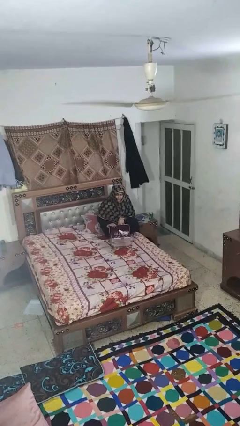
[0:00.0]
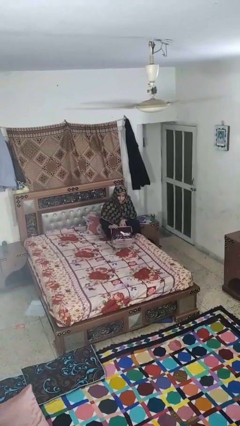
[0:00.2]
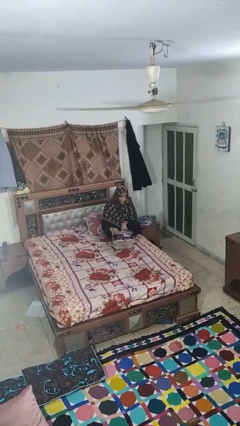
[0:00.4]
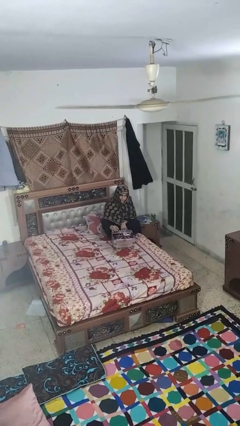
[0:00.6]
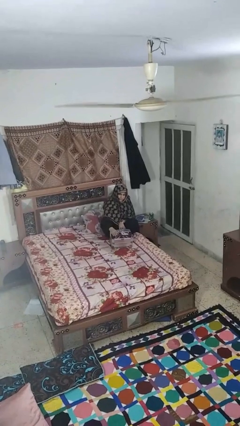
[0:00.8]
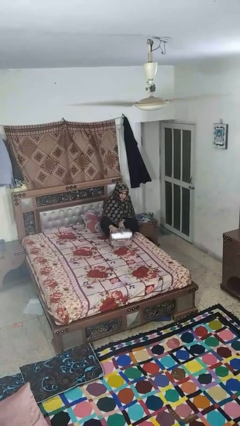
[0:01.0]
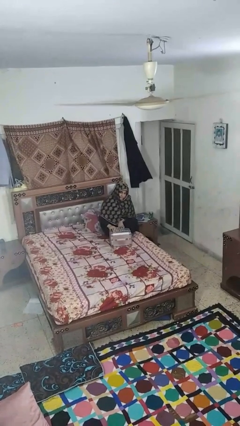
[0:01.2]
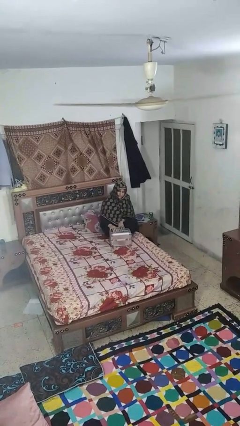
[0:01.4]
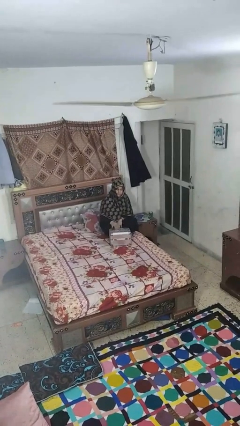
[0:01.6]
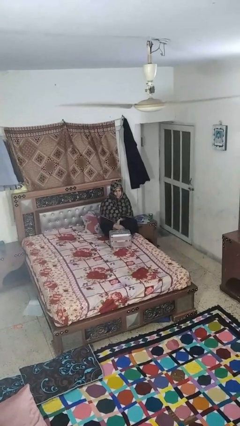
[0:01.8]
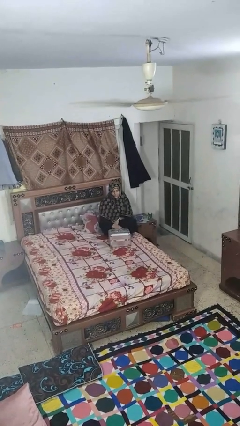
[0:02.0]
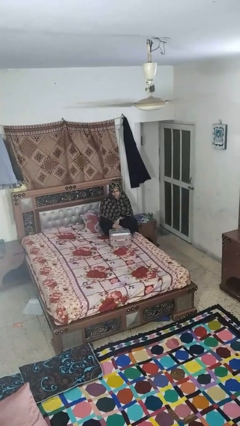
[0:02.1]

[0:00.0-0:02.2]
person closes jewelry box

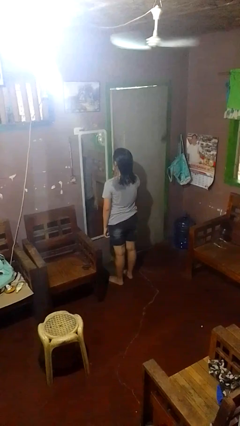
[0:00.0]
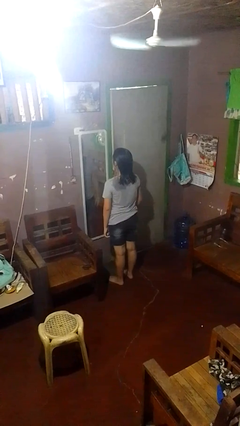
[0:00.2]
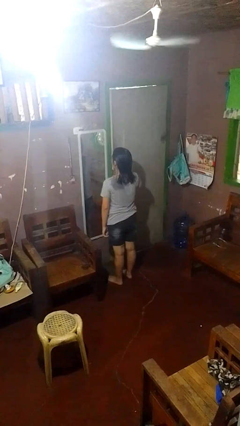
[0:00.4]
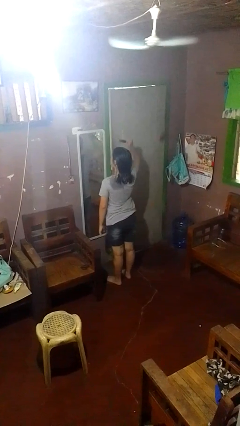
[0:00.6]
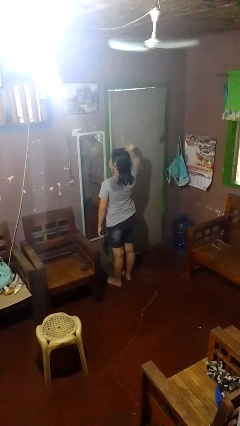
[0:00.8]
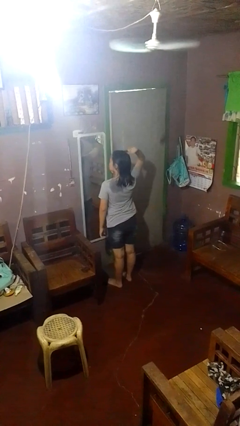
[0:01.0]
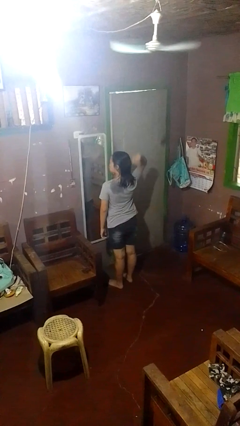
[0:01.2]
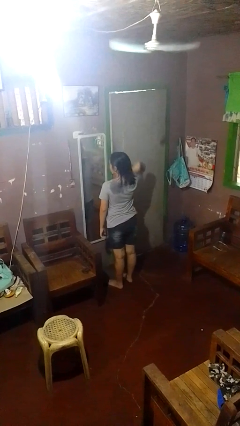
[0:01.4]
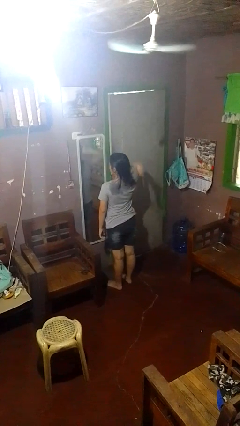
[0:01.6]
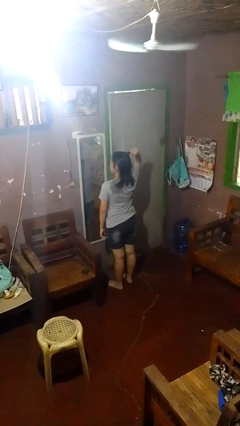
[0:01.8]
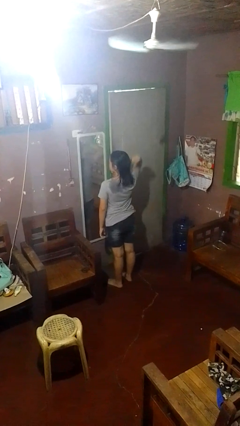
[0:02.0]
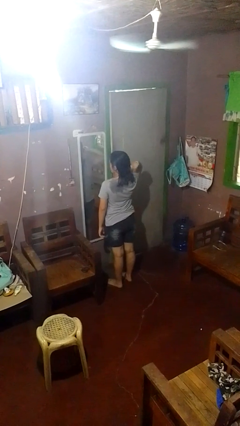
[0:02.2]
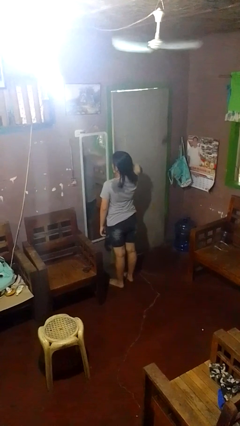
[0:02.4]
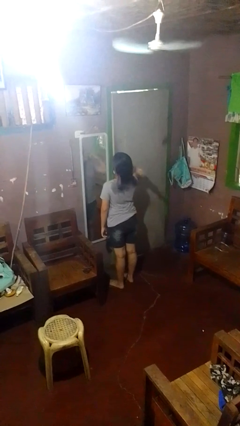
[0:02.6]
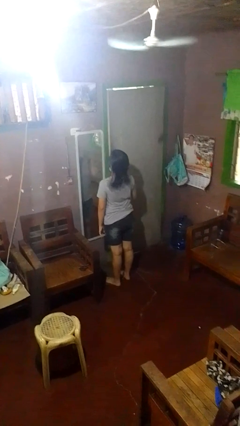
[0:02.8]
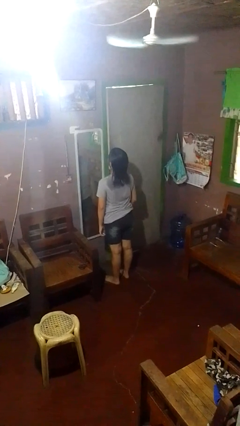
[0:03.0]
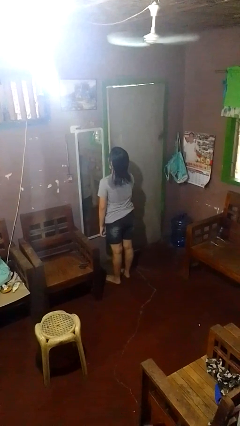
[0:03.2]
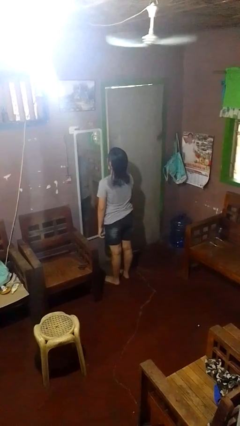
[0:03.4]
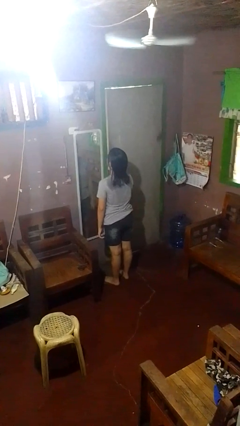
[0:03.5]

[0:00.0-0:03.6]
person brushes hair

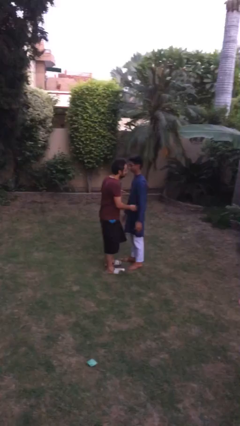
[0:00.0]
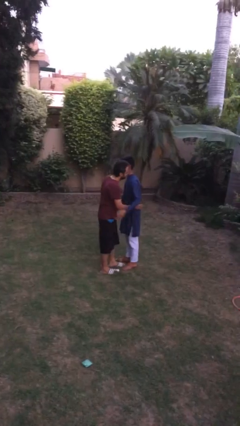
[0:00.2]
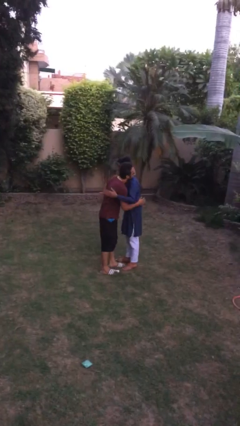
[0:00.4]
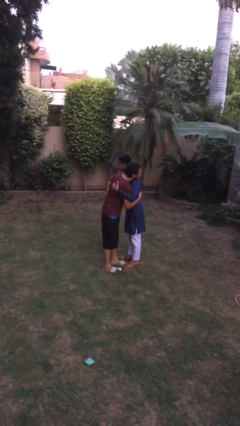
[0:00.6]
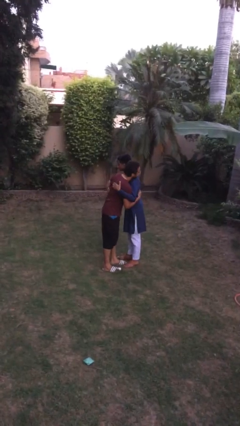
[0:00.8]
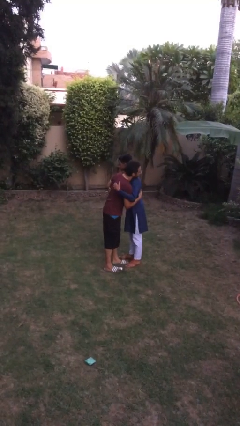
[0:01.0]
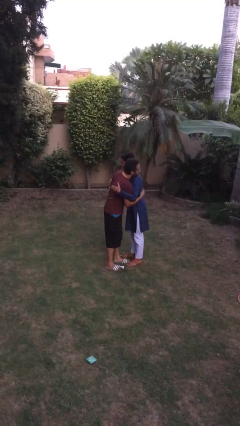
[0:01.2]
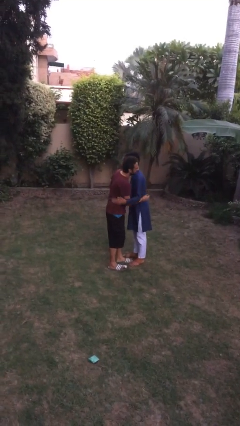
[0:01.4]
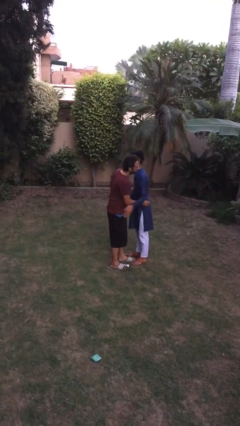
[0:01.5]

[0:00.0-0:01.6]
person embraces person

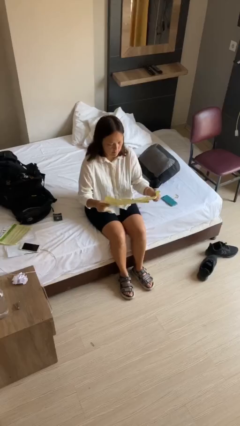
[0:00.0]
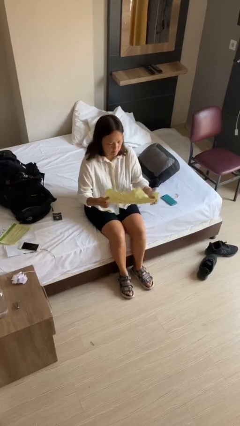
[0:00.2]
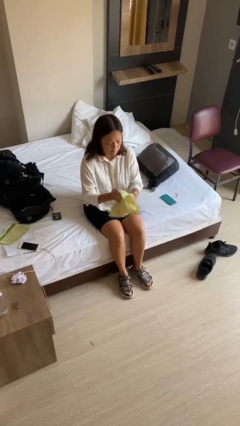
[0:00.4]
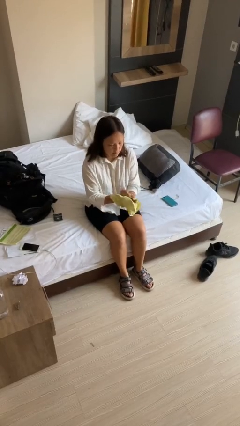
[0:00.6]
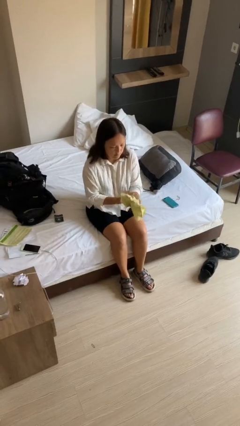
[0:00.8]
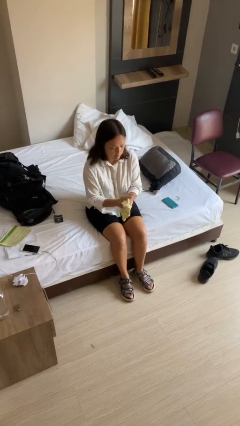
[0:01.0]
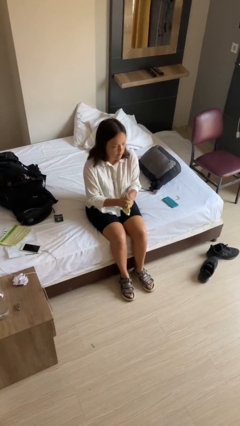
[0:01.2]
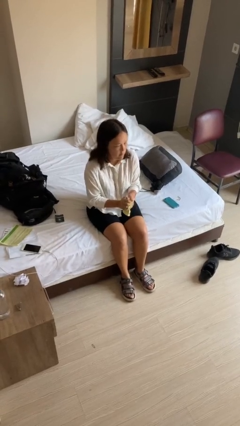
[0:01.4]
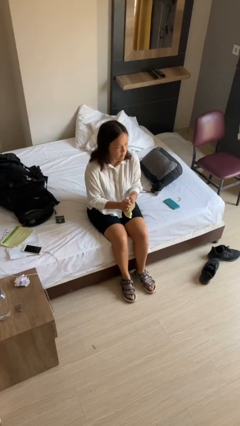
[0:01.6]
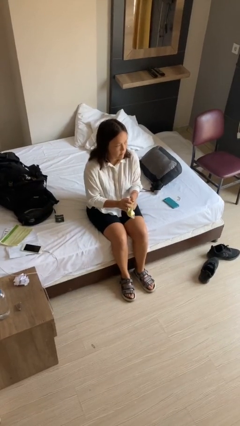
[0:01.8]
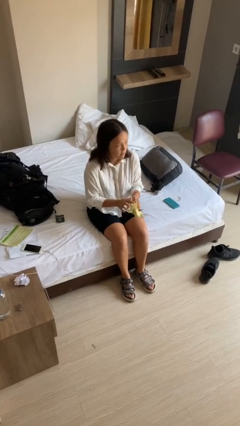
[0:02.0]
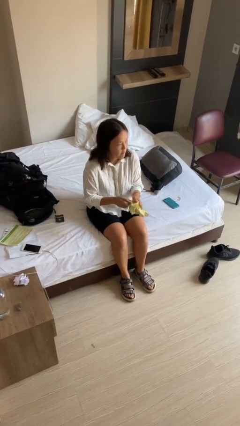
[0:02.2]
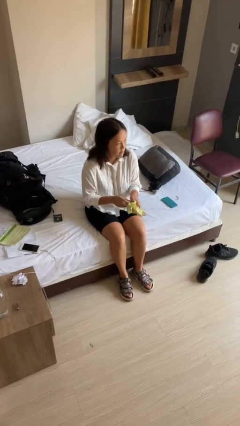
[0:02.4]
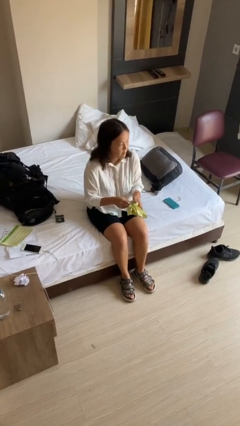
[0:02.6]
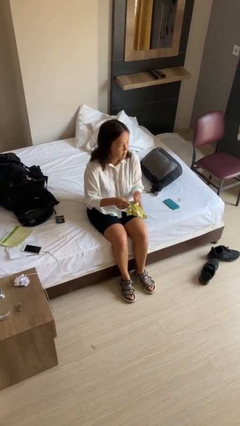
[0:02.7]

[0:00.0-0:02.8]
person crumples paper

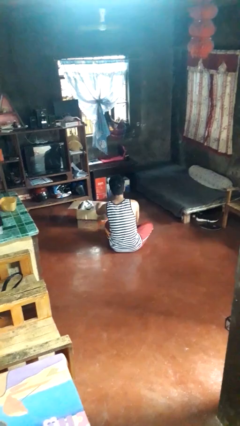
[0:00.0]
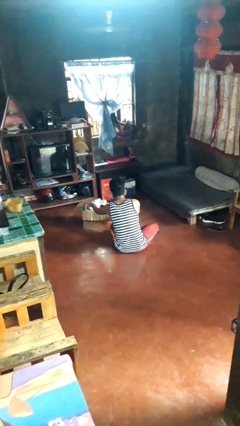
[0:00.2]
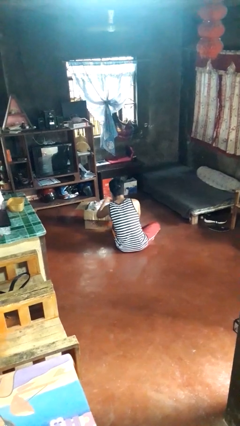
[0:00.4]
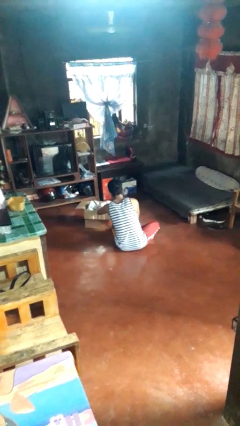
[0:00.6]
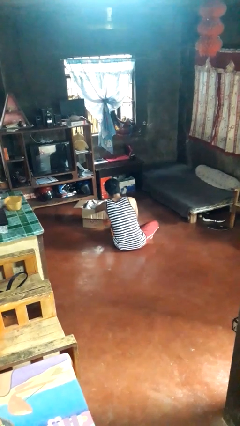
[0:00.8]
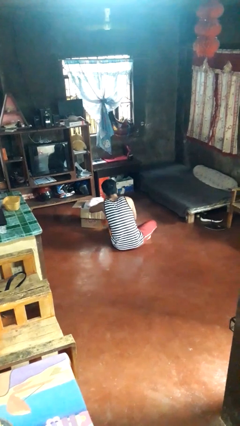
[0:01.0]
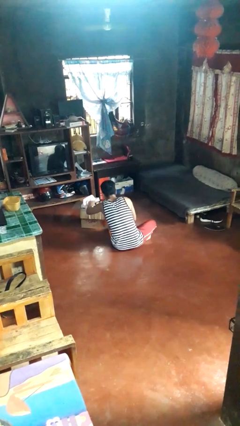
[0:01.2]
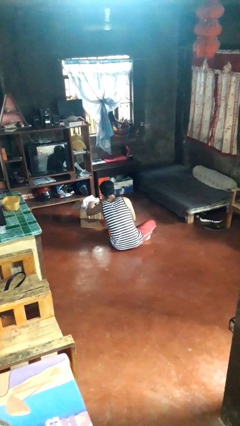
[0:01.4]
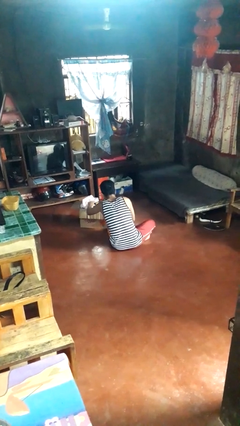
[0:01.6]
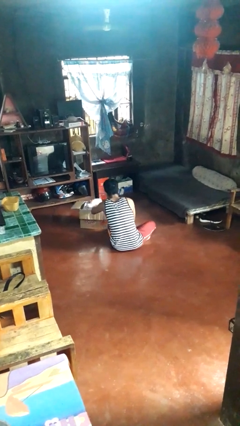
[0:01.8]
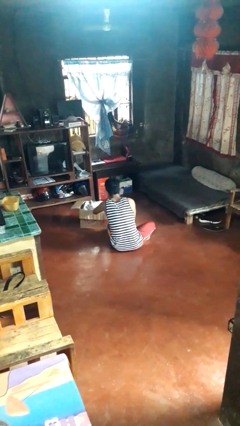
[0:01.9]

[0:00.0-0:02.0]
person searches in box

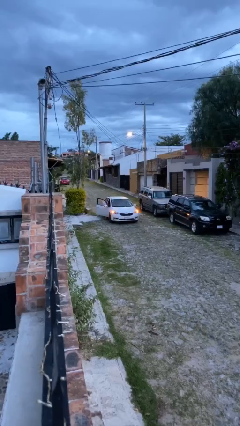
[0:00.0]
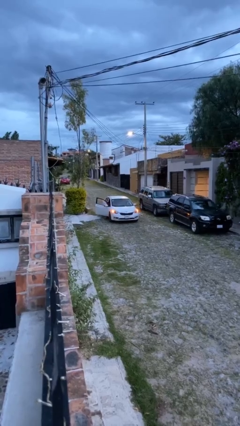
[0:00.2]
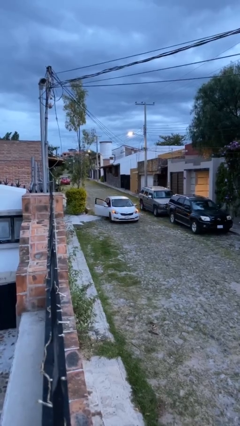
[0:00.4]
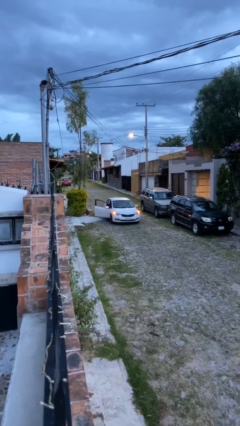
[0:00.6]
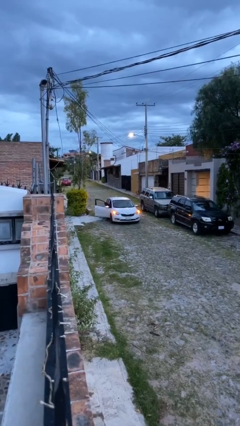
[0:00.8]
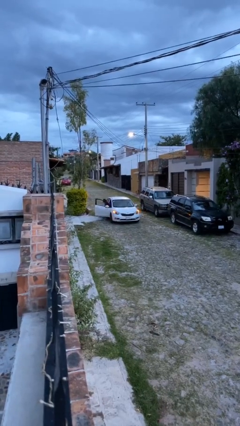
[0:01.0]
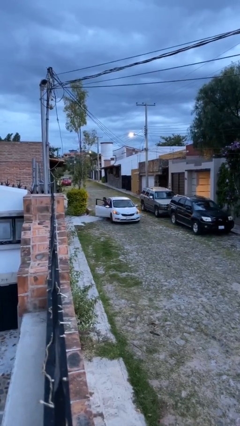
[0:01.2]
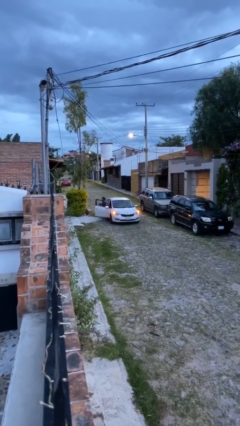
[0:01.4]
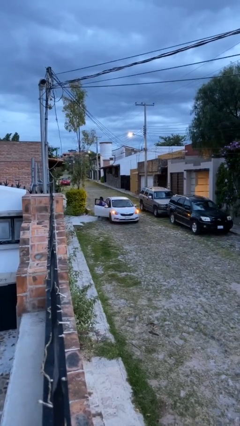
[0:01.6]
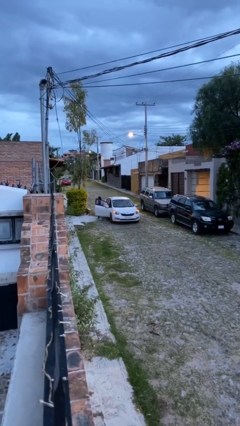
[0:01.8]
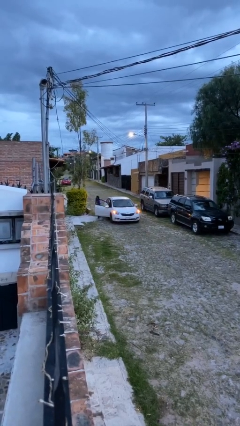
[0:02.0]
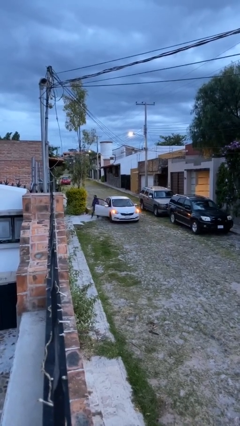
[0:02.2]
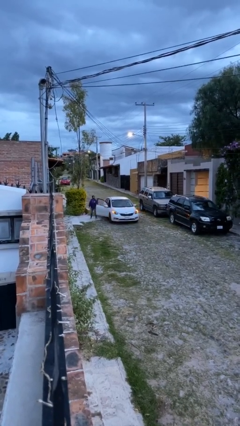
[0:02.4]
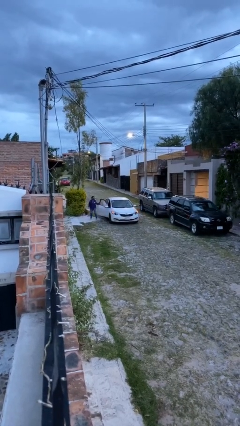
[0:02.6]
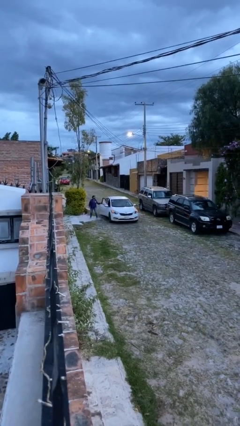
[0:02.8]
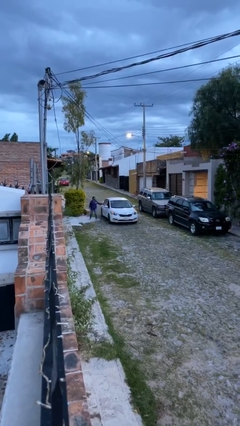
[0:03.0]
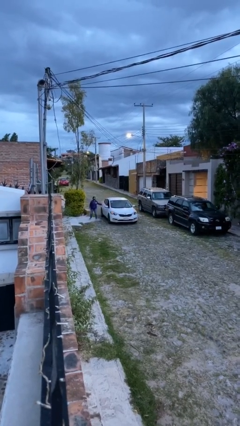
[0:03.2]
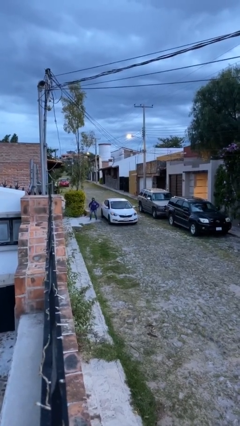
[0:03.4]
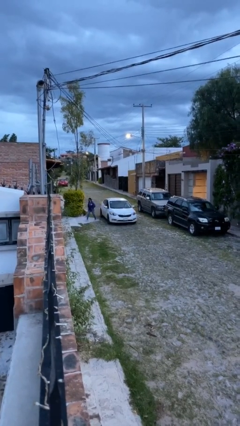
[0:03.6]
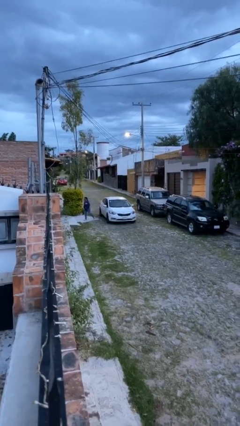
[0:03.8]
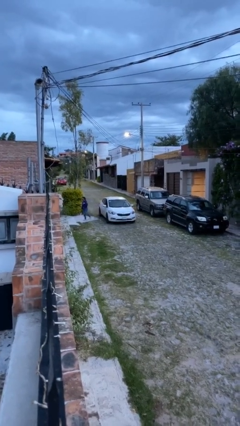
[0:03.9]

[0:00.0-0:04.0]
car drops off person

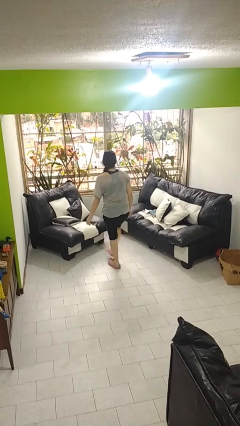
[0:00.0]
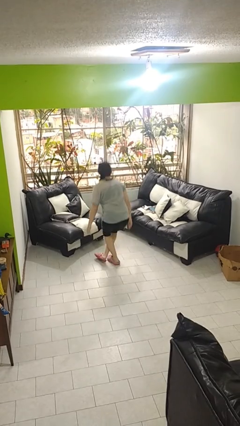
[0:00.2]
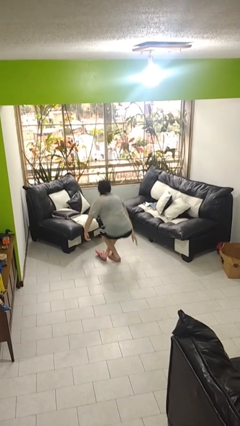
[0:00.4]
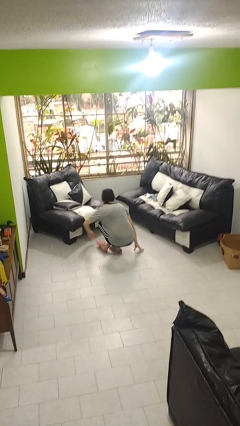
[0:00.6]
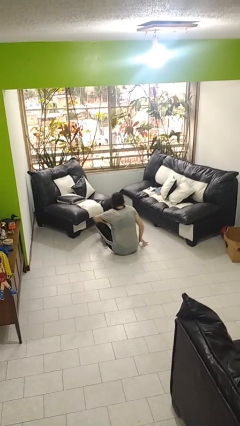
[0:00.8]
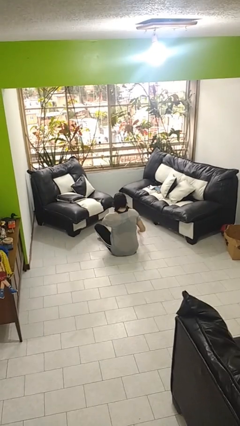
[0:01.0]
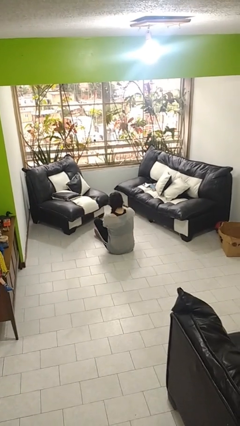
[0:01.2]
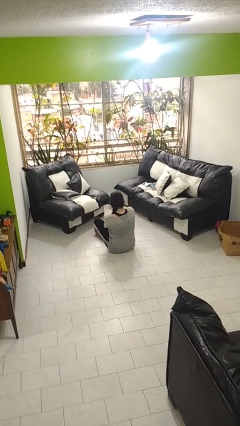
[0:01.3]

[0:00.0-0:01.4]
person sits crisscross
